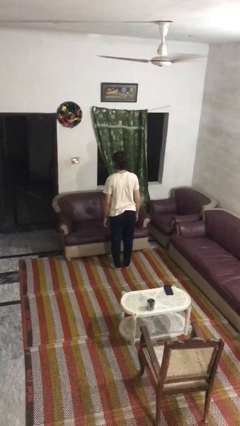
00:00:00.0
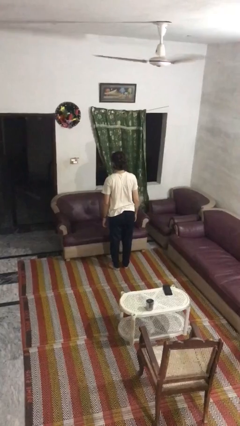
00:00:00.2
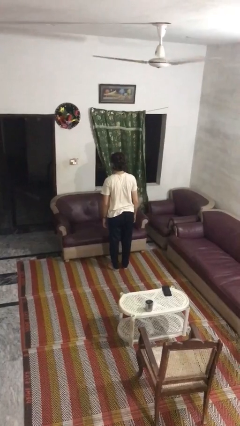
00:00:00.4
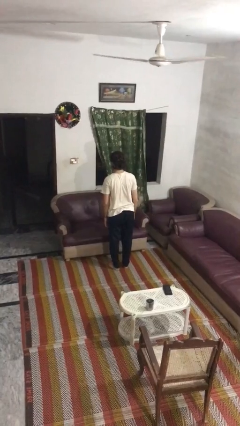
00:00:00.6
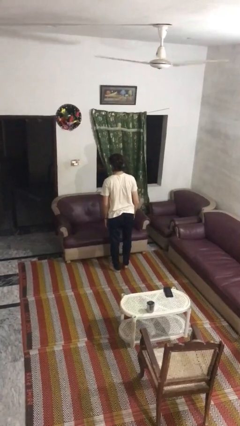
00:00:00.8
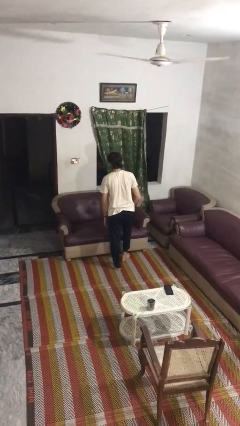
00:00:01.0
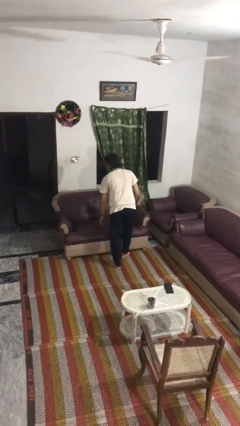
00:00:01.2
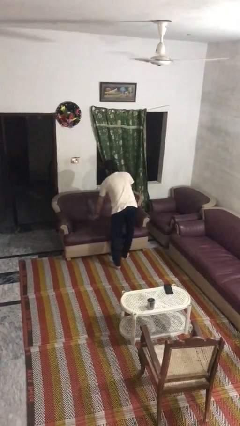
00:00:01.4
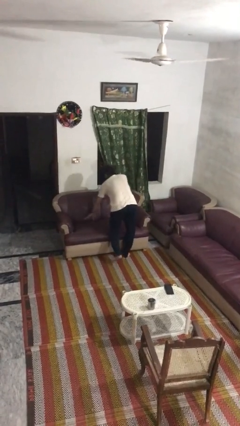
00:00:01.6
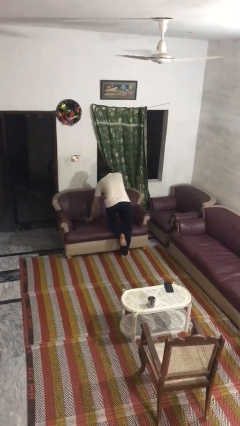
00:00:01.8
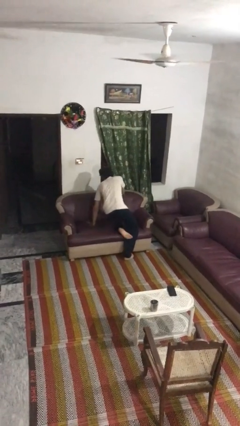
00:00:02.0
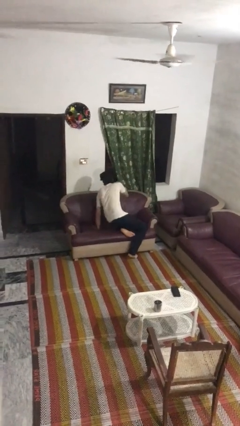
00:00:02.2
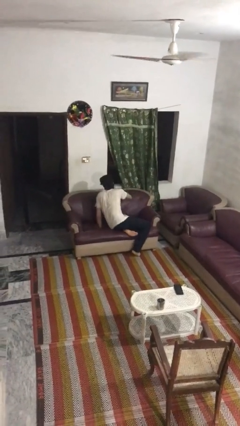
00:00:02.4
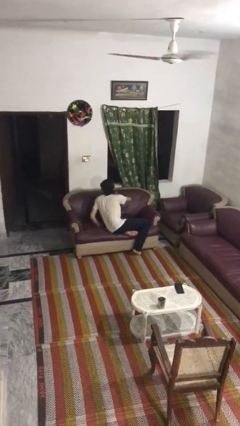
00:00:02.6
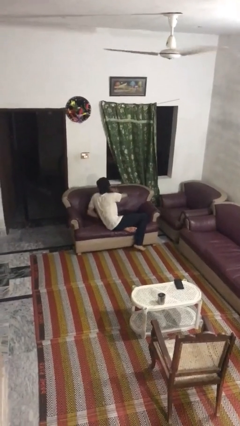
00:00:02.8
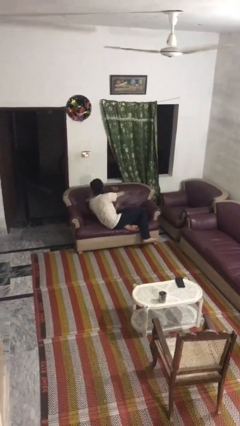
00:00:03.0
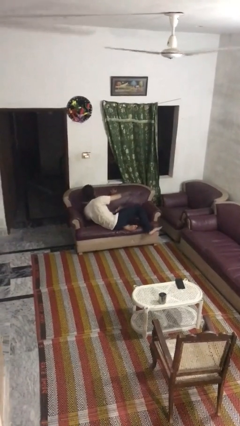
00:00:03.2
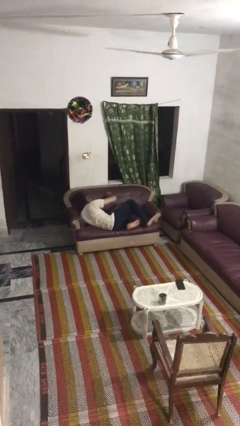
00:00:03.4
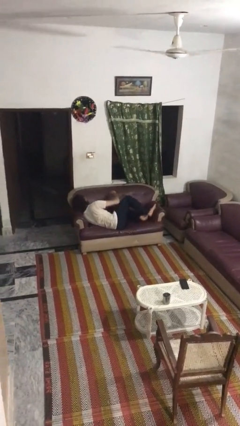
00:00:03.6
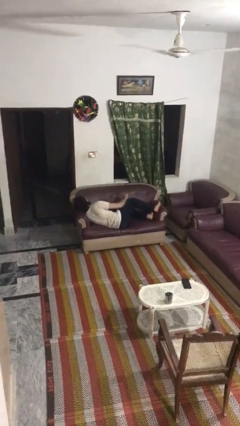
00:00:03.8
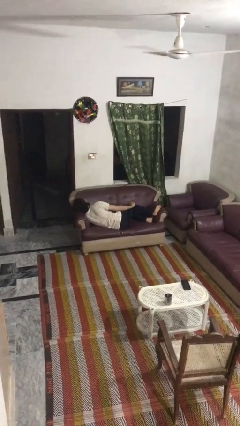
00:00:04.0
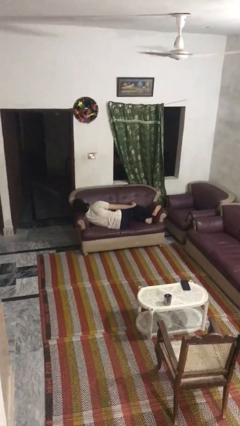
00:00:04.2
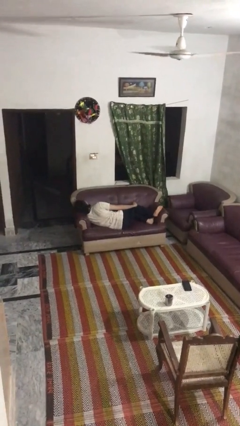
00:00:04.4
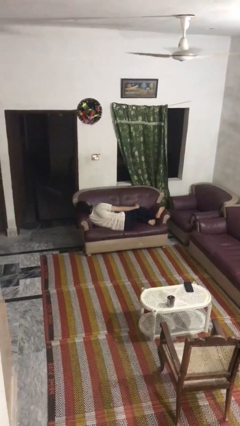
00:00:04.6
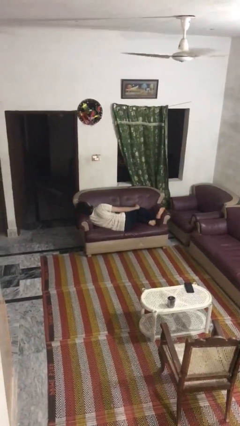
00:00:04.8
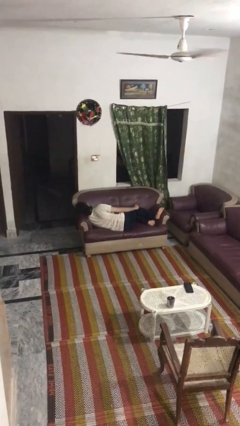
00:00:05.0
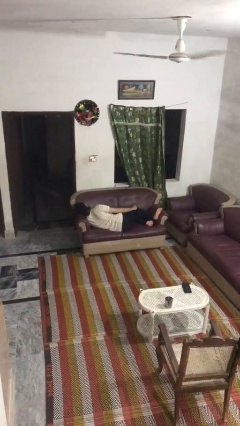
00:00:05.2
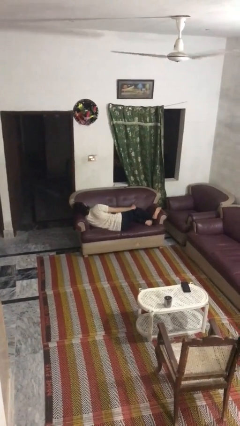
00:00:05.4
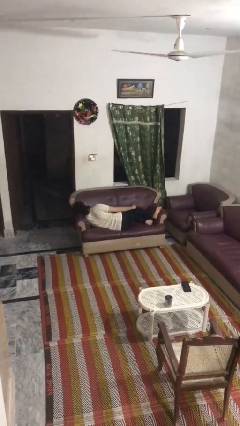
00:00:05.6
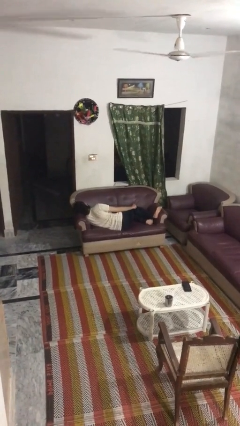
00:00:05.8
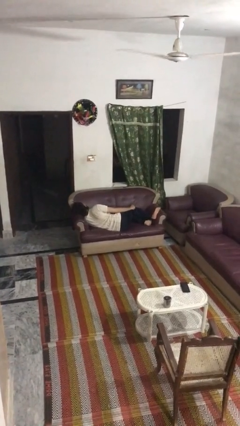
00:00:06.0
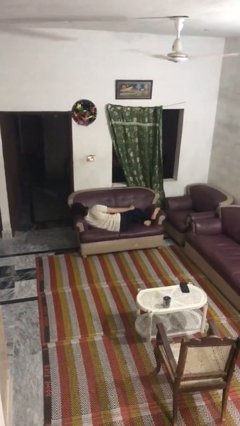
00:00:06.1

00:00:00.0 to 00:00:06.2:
person lies down on couch

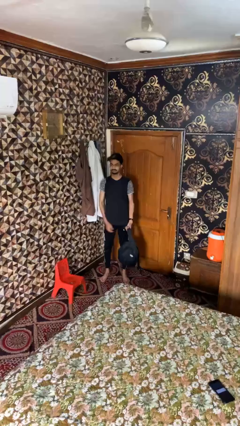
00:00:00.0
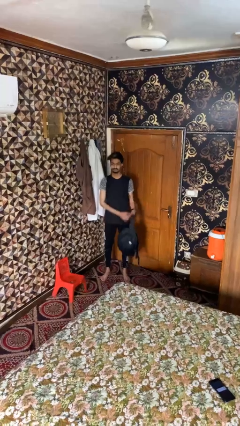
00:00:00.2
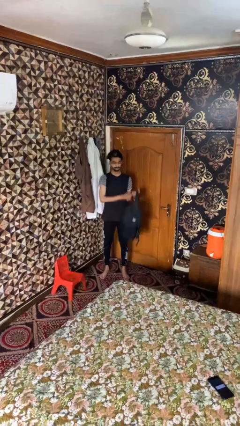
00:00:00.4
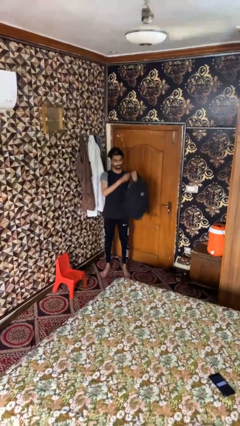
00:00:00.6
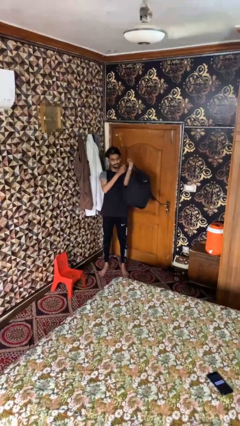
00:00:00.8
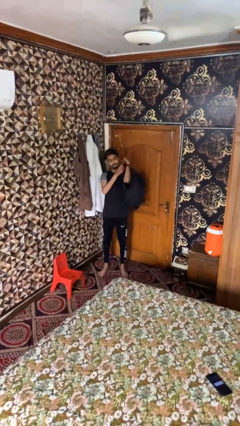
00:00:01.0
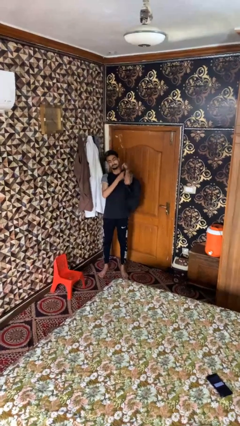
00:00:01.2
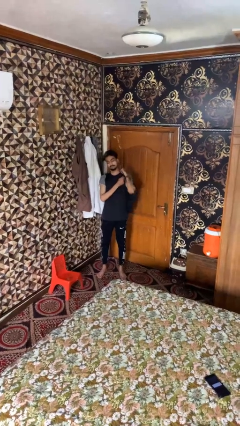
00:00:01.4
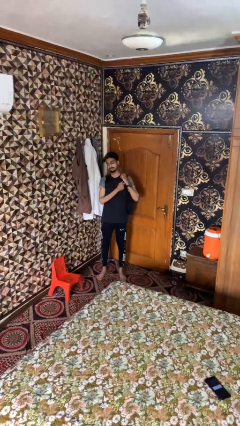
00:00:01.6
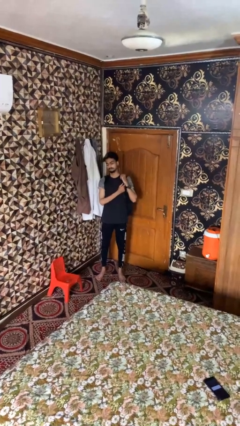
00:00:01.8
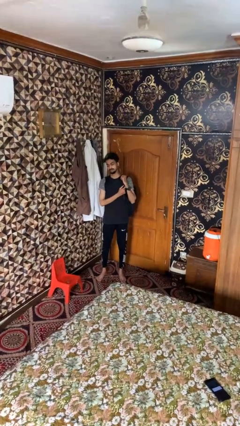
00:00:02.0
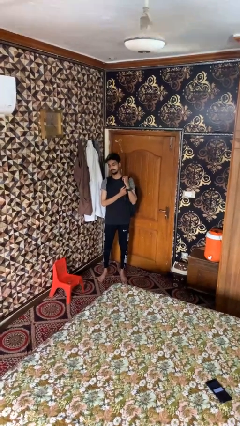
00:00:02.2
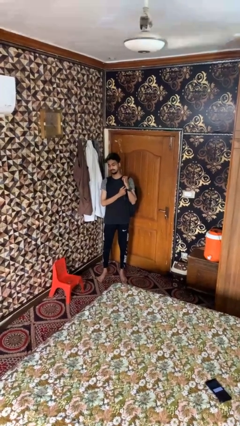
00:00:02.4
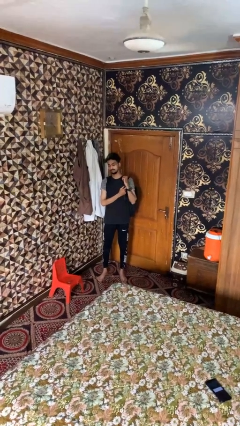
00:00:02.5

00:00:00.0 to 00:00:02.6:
person puts on backpack

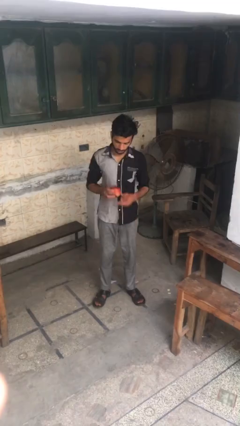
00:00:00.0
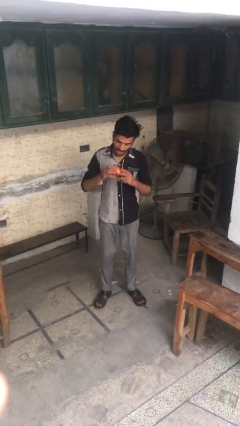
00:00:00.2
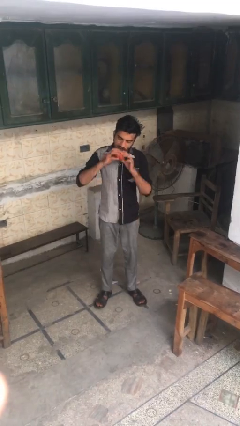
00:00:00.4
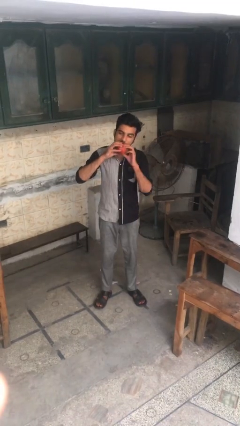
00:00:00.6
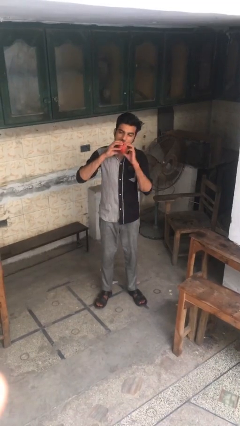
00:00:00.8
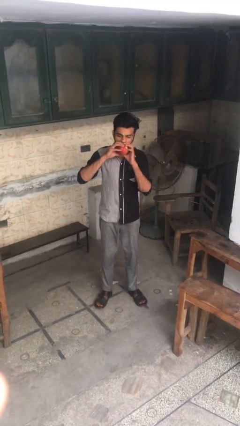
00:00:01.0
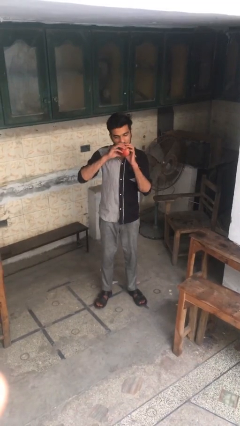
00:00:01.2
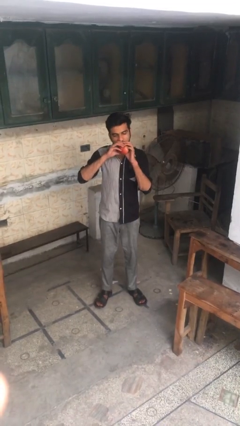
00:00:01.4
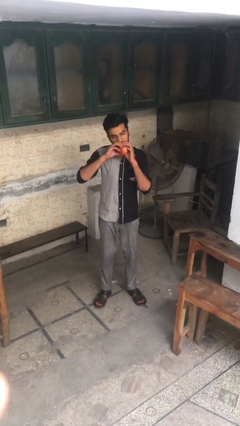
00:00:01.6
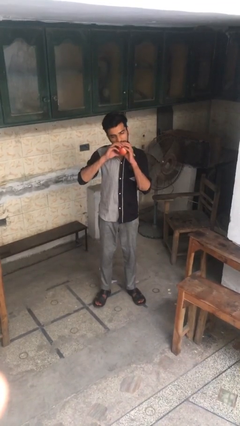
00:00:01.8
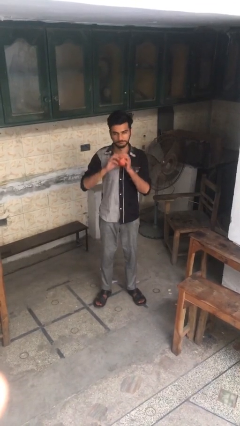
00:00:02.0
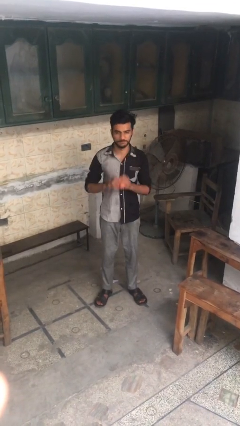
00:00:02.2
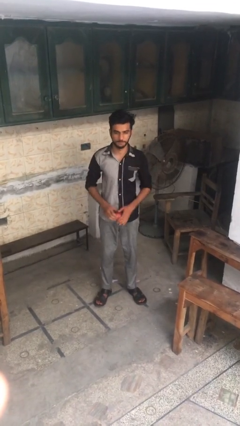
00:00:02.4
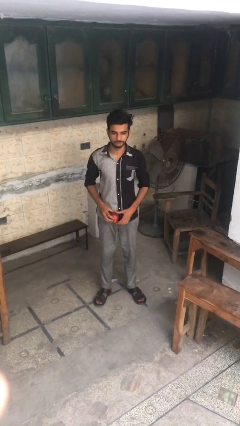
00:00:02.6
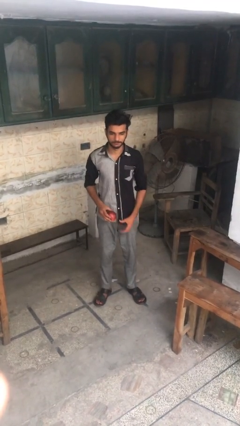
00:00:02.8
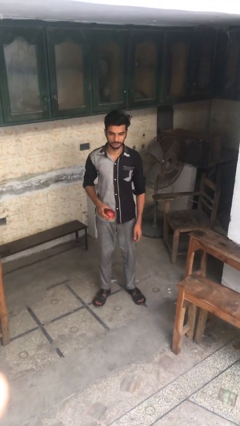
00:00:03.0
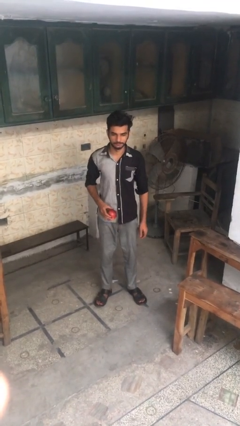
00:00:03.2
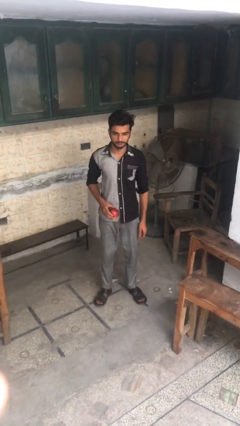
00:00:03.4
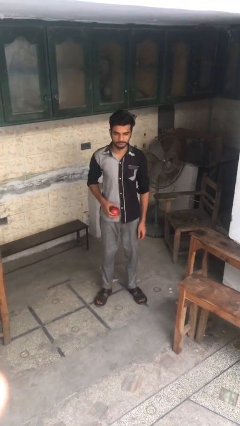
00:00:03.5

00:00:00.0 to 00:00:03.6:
person eats apple

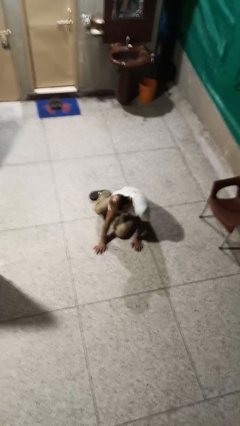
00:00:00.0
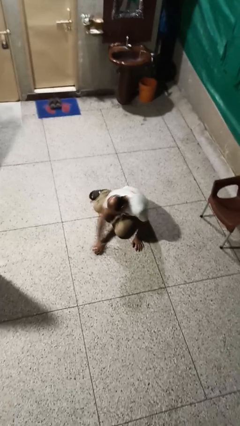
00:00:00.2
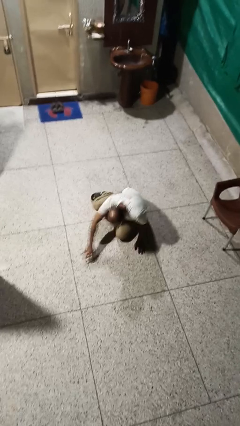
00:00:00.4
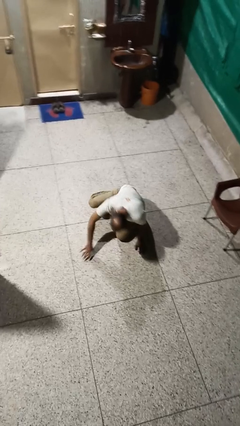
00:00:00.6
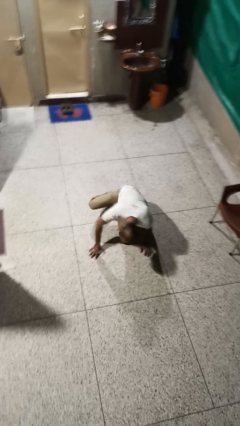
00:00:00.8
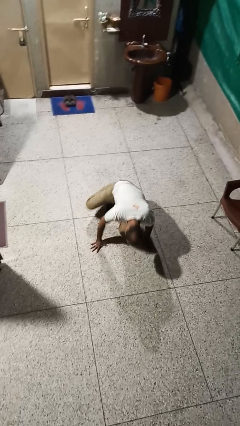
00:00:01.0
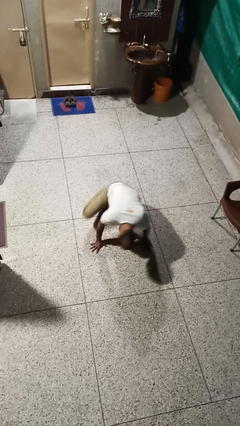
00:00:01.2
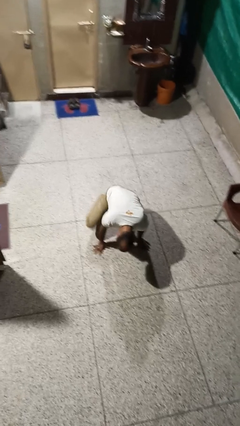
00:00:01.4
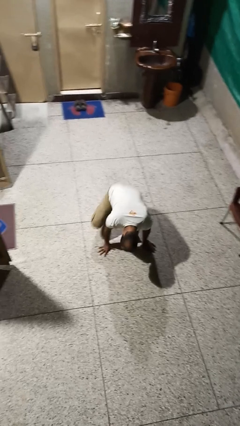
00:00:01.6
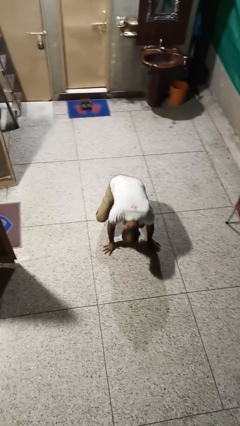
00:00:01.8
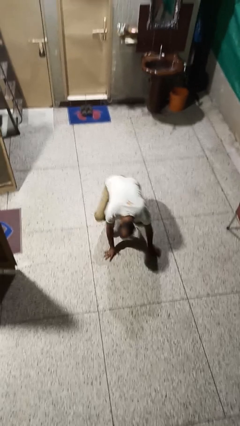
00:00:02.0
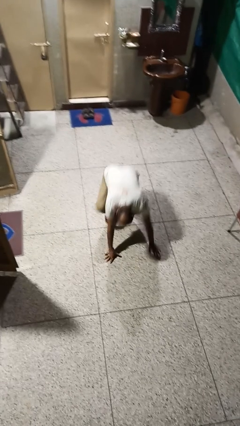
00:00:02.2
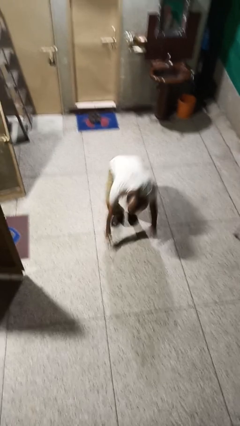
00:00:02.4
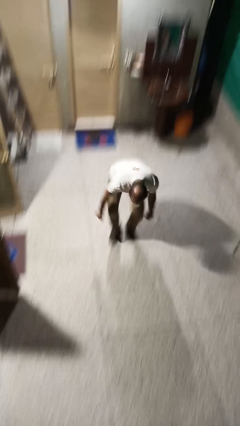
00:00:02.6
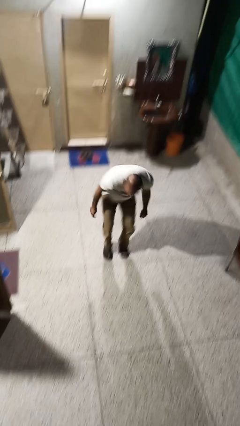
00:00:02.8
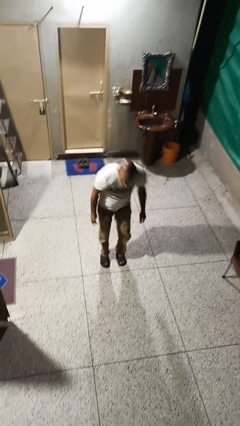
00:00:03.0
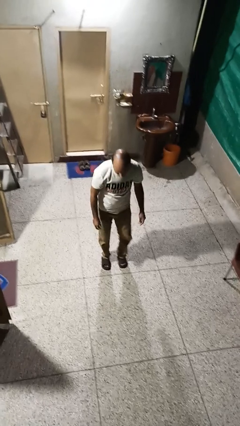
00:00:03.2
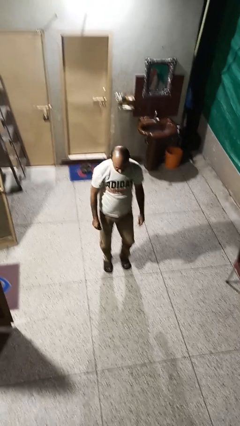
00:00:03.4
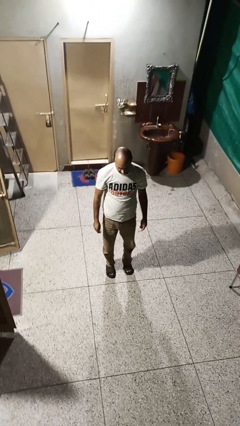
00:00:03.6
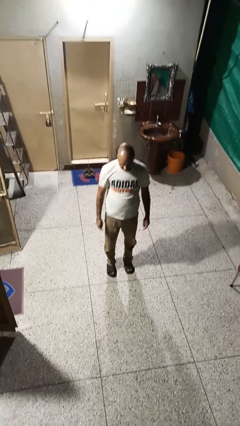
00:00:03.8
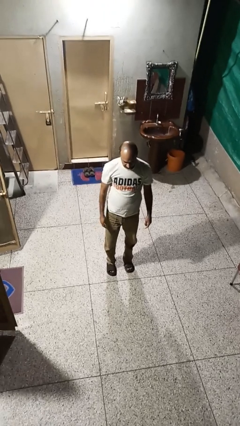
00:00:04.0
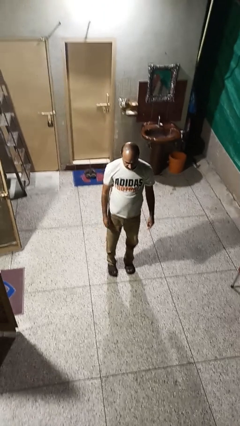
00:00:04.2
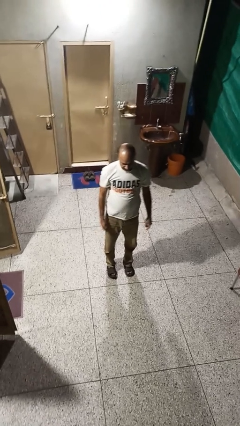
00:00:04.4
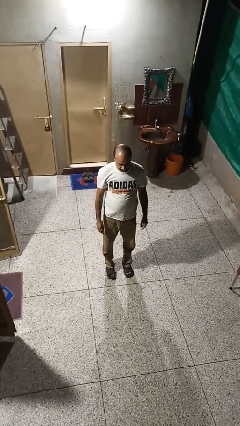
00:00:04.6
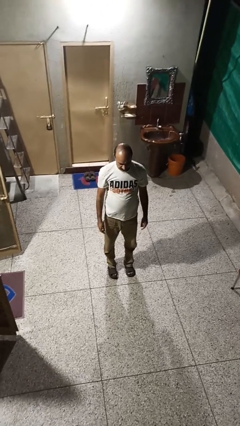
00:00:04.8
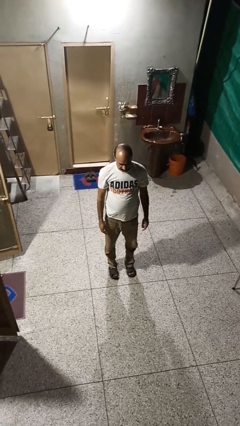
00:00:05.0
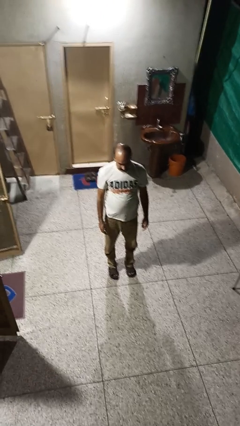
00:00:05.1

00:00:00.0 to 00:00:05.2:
person stands up from floor
